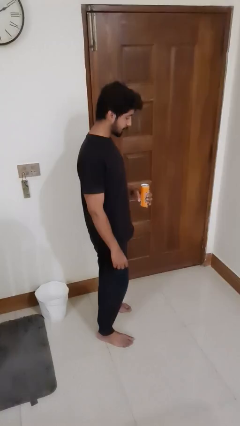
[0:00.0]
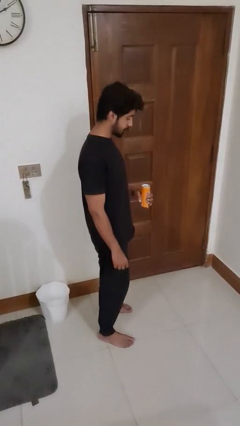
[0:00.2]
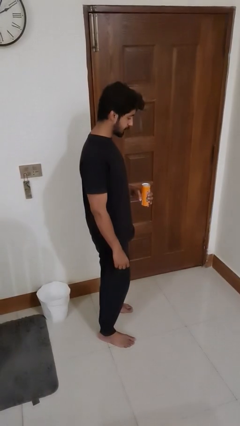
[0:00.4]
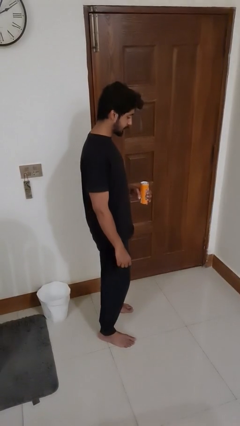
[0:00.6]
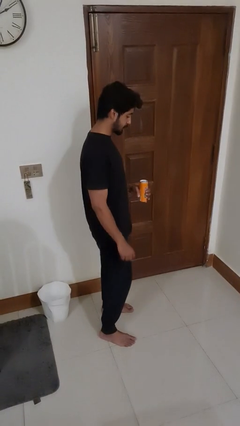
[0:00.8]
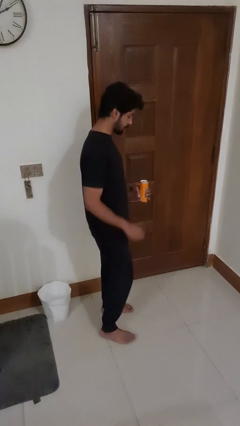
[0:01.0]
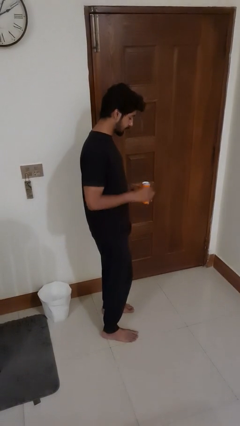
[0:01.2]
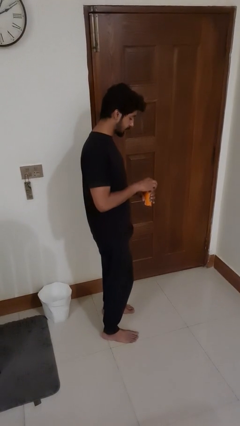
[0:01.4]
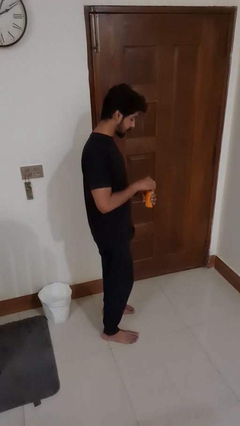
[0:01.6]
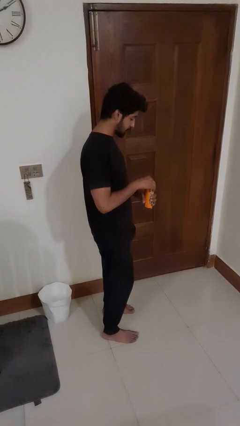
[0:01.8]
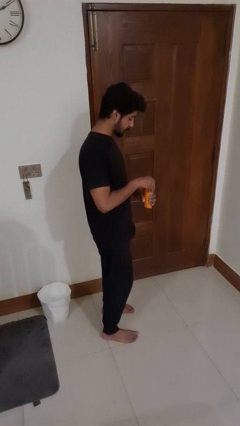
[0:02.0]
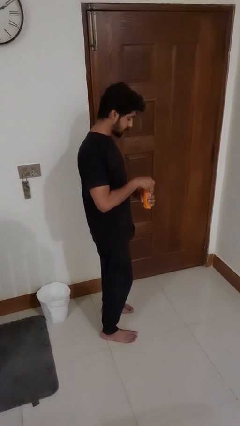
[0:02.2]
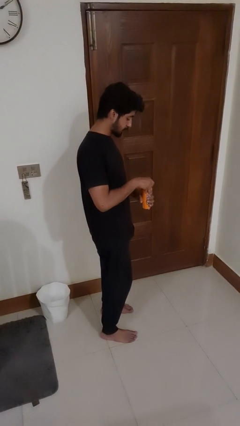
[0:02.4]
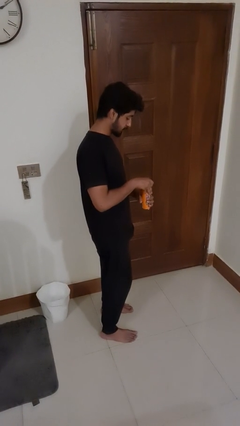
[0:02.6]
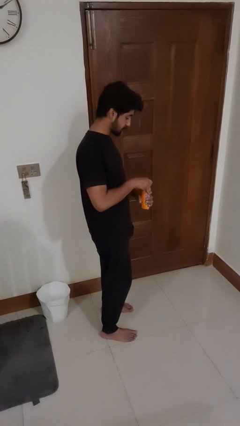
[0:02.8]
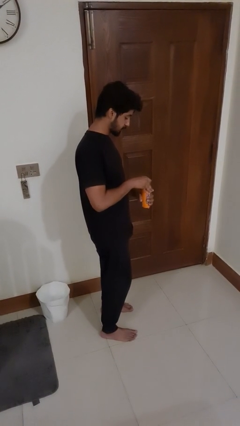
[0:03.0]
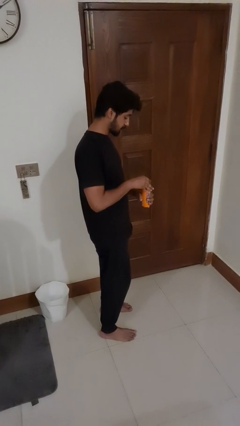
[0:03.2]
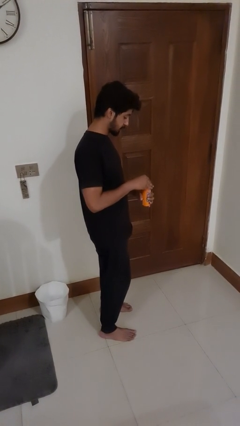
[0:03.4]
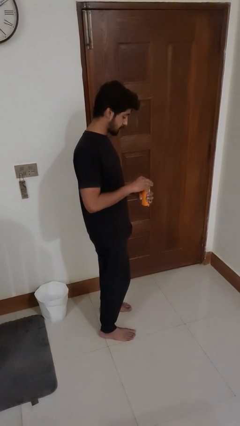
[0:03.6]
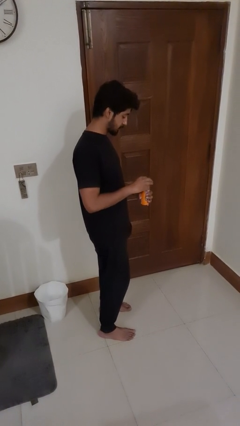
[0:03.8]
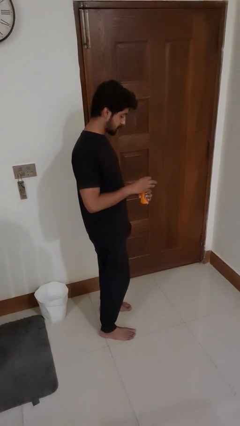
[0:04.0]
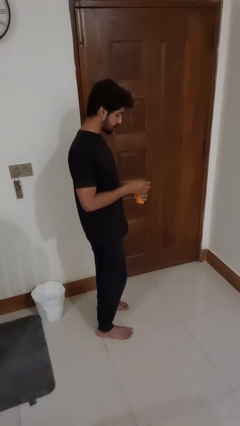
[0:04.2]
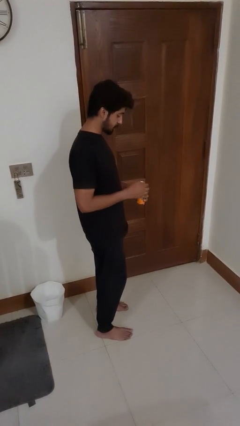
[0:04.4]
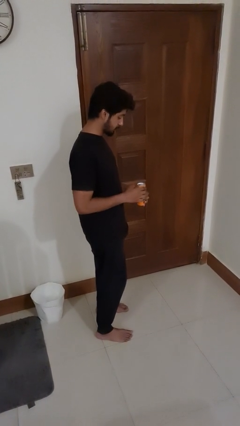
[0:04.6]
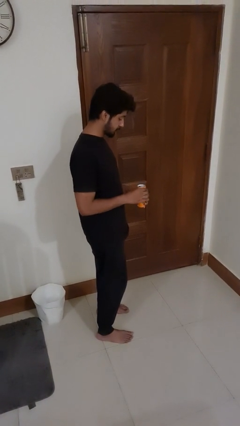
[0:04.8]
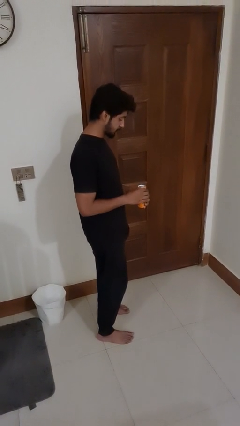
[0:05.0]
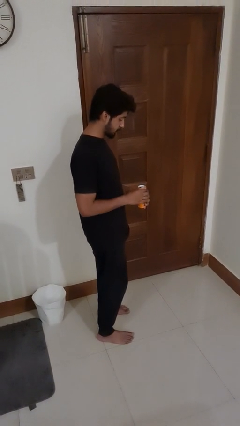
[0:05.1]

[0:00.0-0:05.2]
person opens beverage can

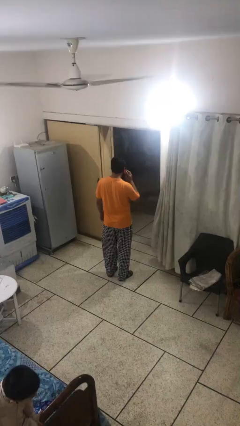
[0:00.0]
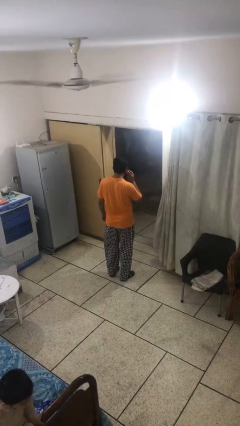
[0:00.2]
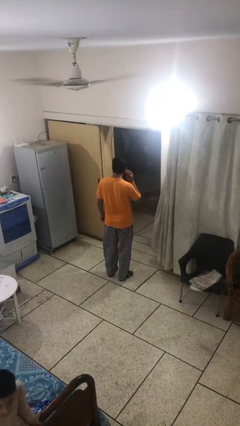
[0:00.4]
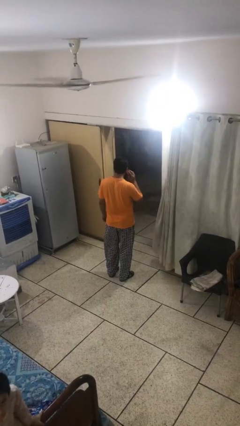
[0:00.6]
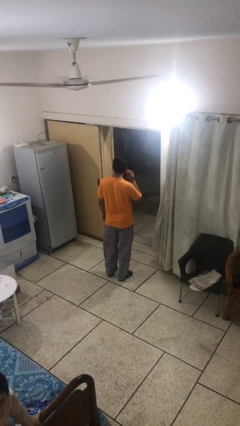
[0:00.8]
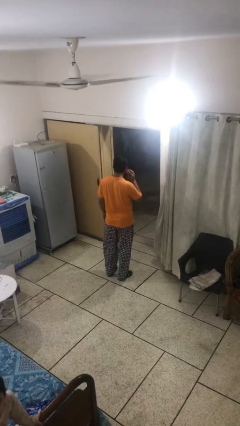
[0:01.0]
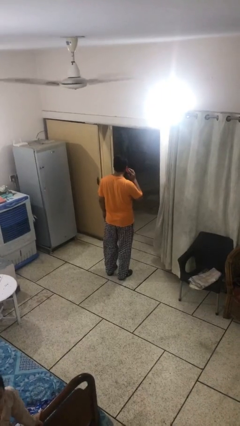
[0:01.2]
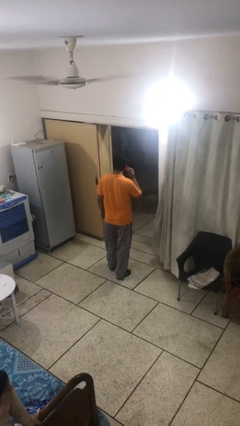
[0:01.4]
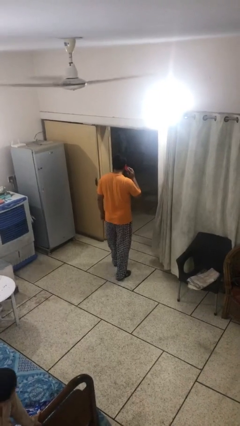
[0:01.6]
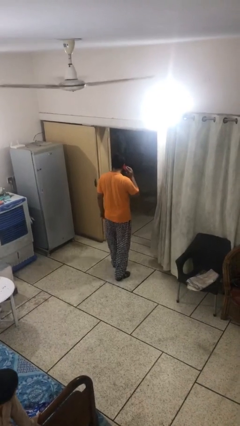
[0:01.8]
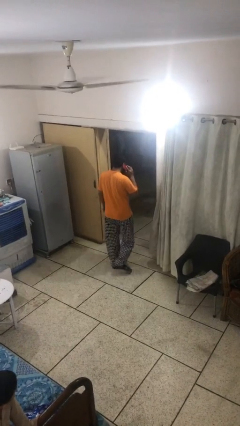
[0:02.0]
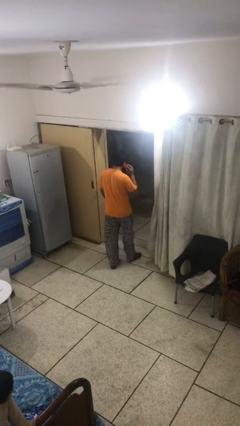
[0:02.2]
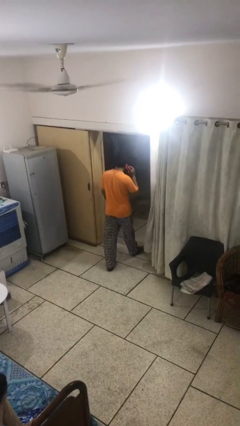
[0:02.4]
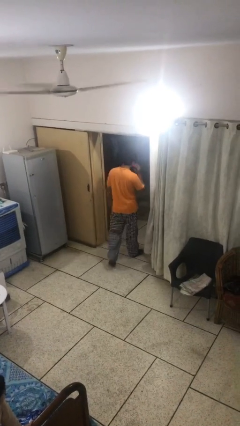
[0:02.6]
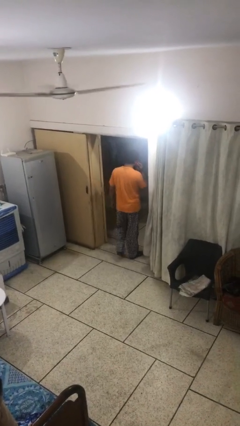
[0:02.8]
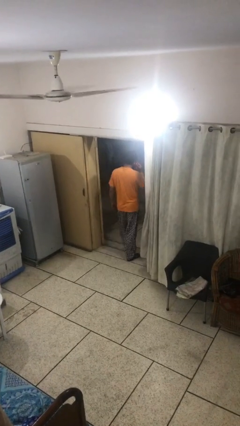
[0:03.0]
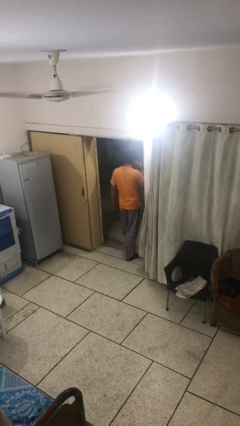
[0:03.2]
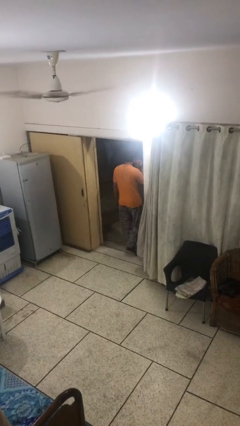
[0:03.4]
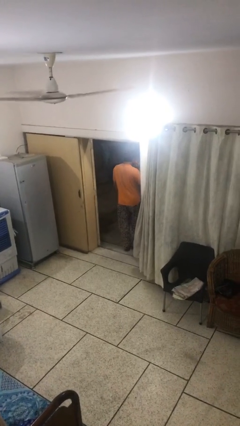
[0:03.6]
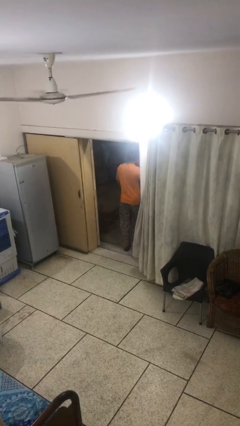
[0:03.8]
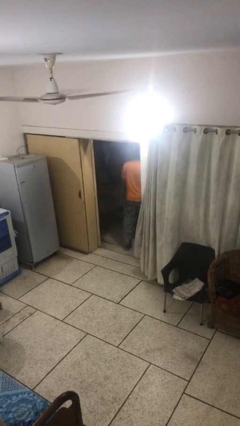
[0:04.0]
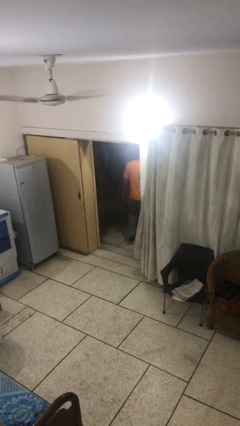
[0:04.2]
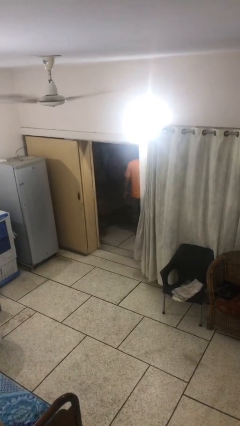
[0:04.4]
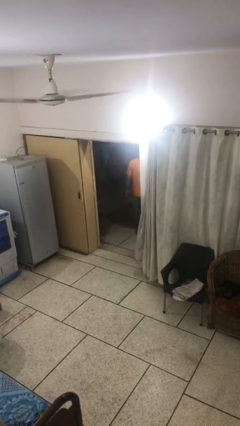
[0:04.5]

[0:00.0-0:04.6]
person exits scene through structure

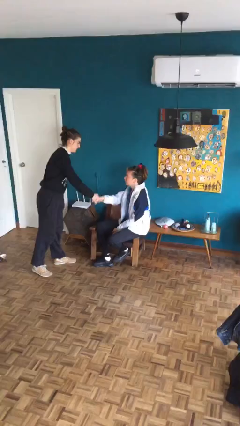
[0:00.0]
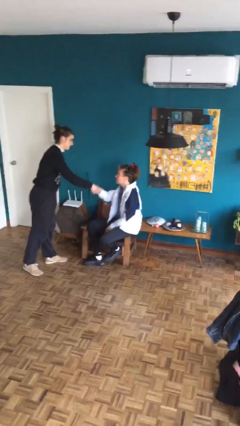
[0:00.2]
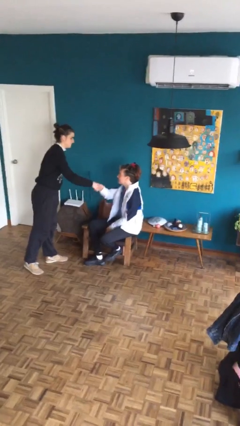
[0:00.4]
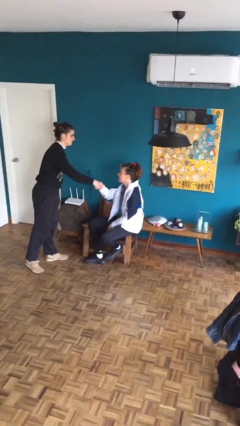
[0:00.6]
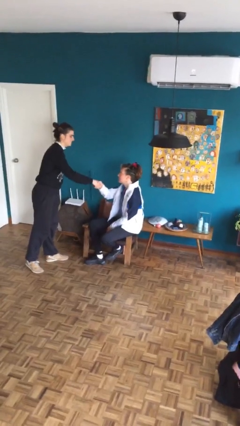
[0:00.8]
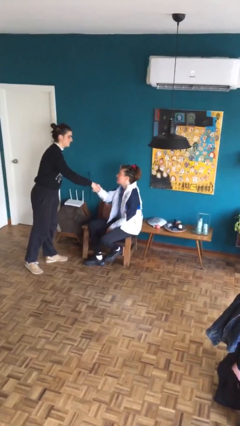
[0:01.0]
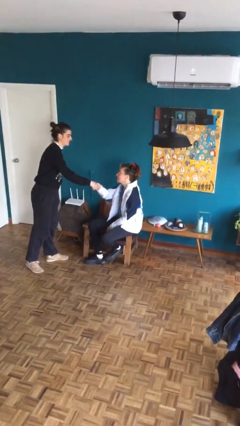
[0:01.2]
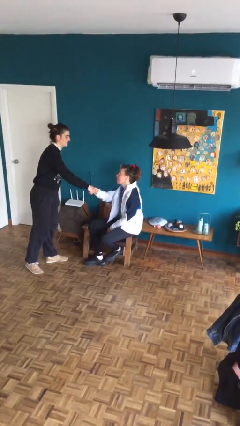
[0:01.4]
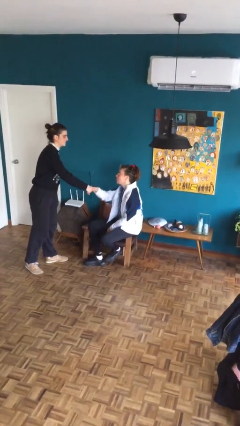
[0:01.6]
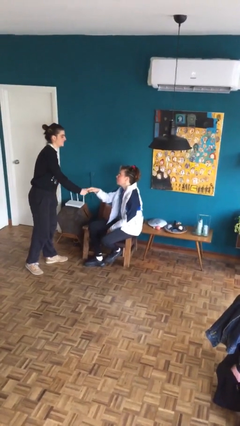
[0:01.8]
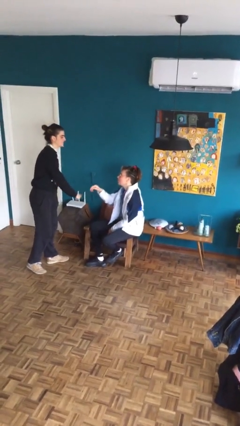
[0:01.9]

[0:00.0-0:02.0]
person shakes hand

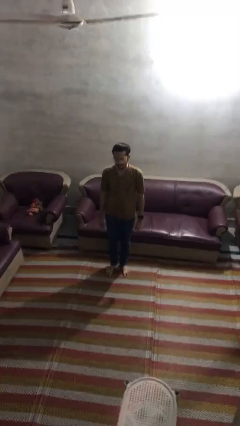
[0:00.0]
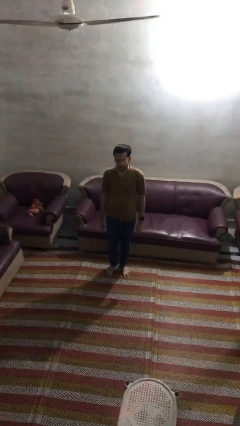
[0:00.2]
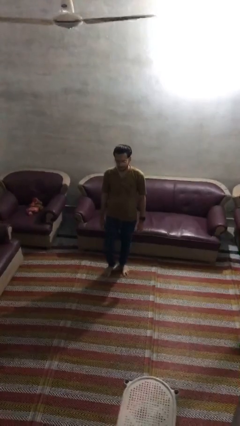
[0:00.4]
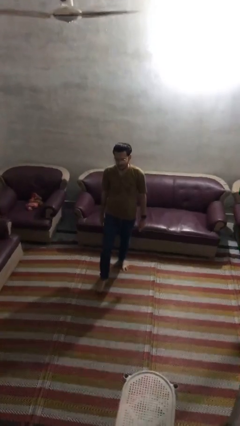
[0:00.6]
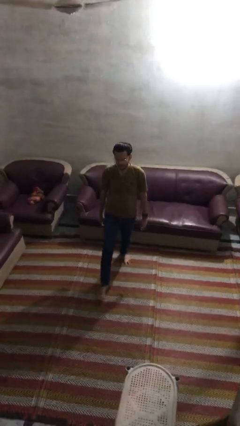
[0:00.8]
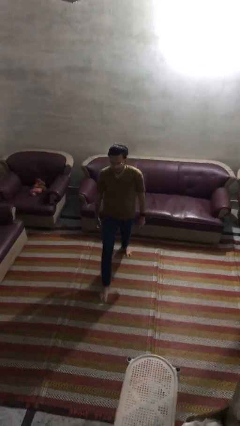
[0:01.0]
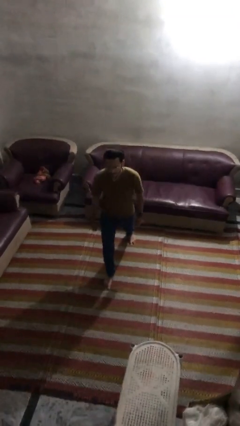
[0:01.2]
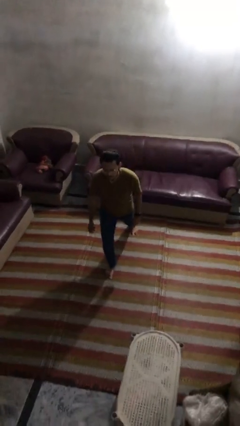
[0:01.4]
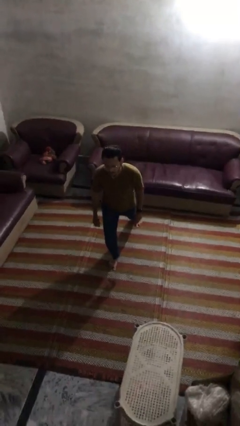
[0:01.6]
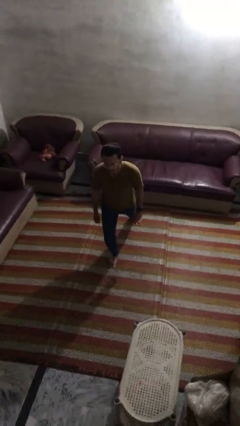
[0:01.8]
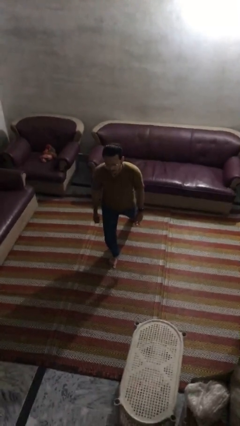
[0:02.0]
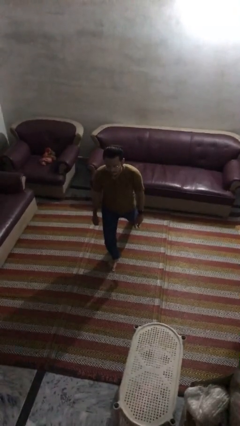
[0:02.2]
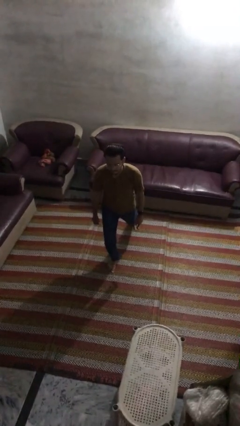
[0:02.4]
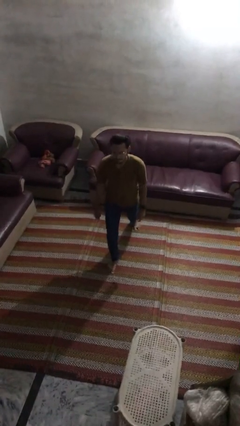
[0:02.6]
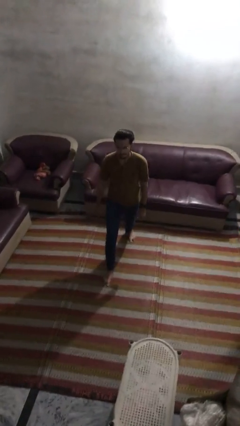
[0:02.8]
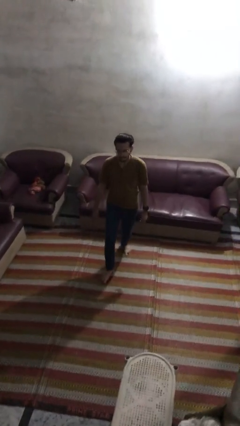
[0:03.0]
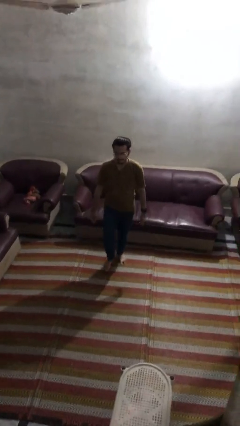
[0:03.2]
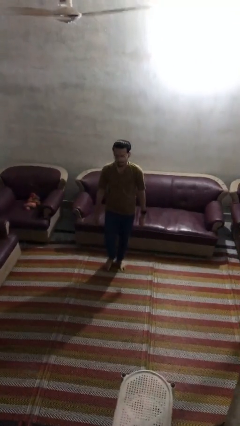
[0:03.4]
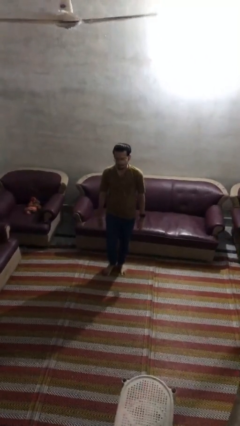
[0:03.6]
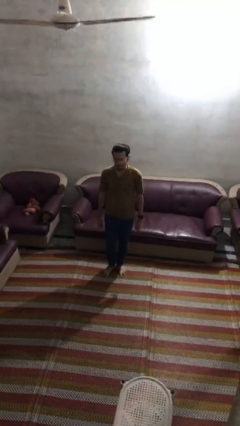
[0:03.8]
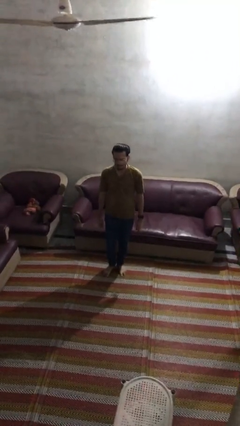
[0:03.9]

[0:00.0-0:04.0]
person exercises with lunges

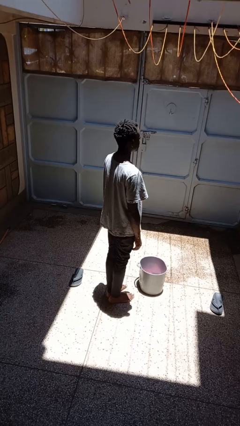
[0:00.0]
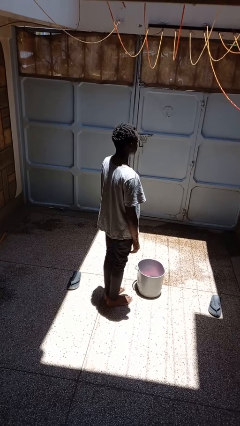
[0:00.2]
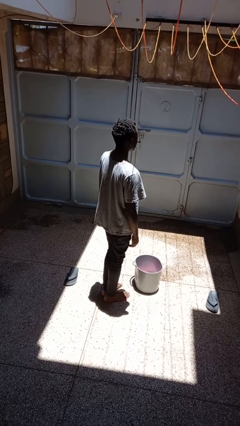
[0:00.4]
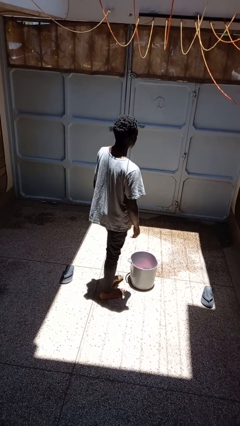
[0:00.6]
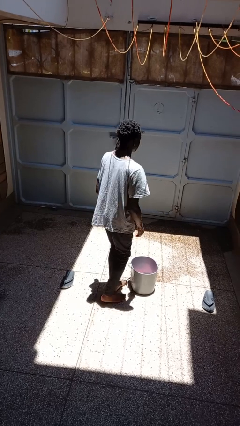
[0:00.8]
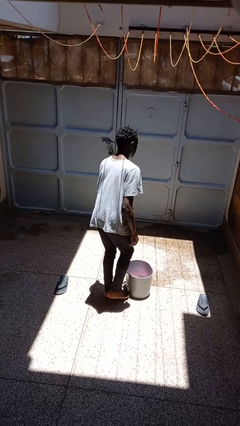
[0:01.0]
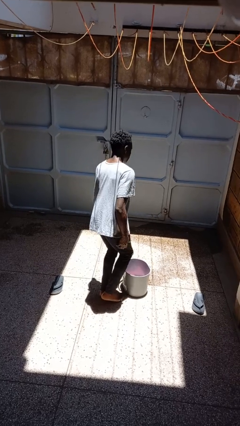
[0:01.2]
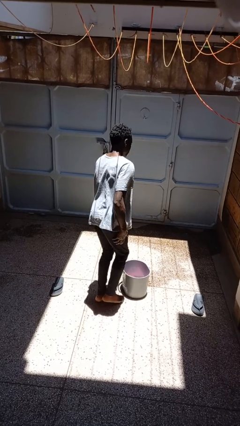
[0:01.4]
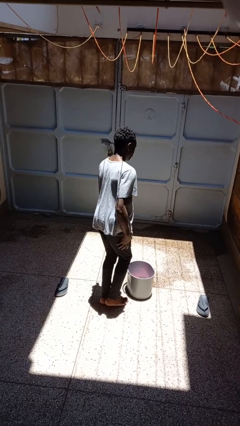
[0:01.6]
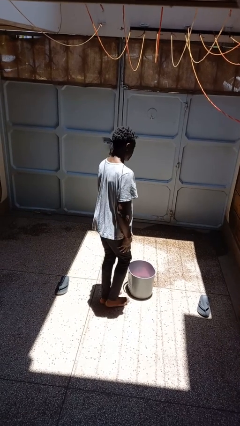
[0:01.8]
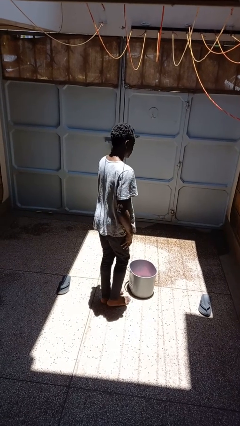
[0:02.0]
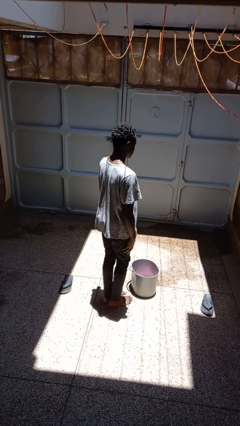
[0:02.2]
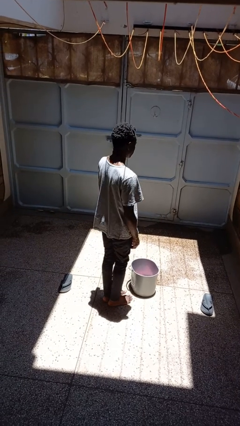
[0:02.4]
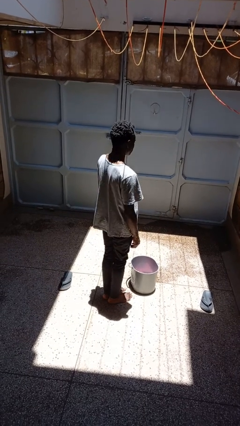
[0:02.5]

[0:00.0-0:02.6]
person stubs toe
